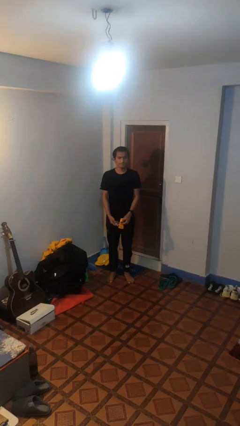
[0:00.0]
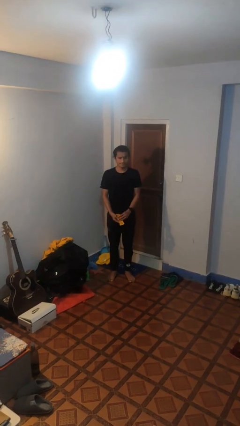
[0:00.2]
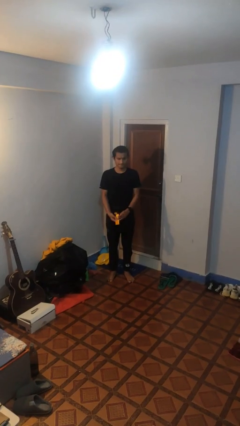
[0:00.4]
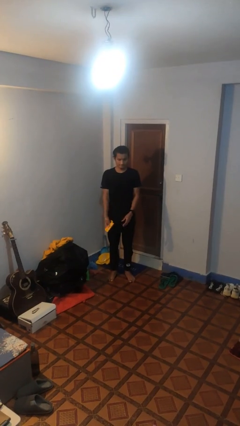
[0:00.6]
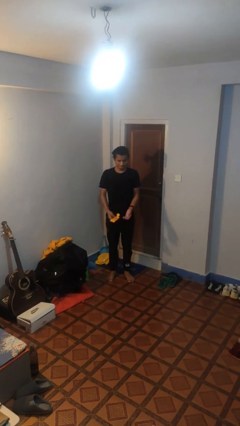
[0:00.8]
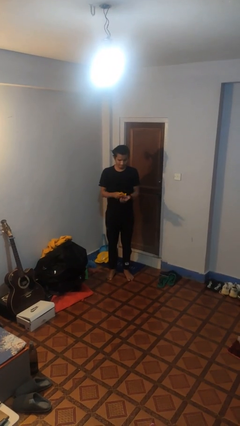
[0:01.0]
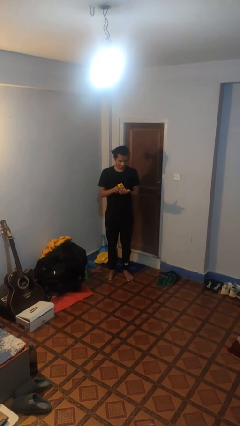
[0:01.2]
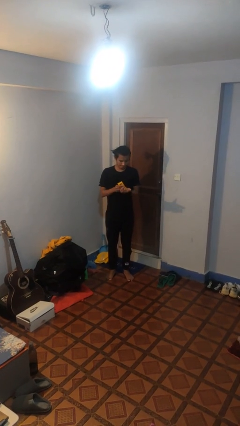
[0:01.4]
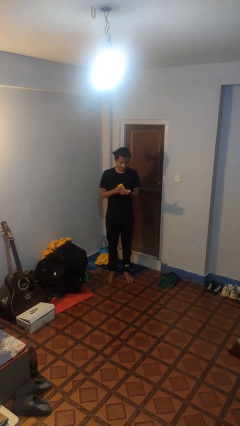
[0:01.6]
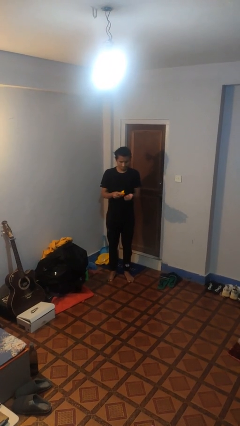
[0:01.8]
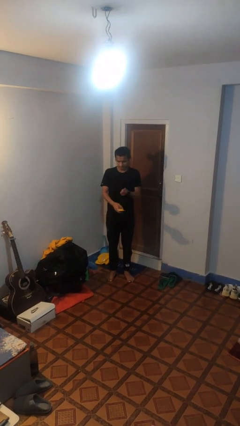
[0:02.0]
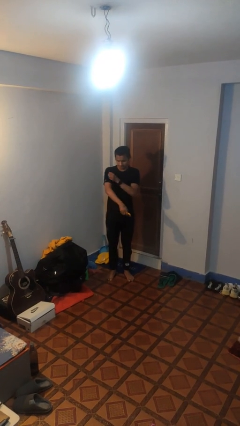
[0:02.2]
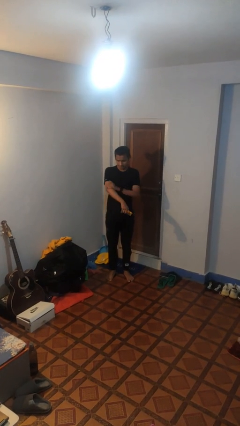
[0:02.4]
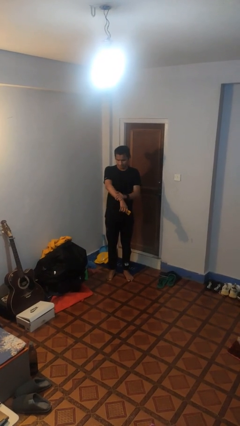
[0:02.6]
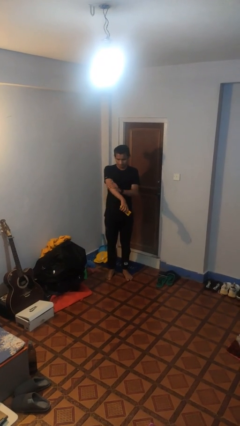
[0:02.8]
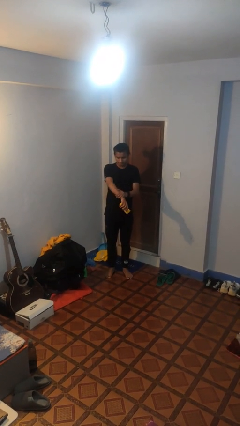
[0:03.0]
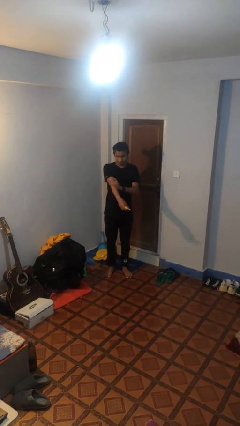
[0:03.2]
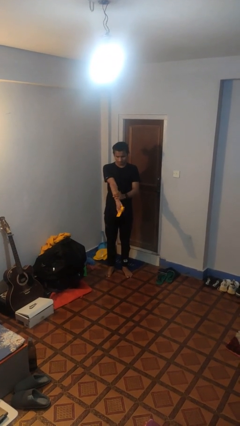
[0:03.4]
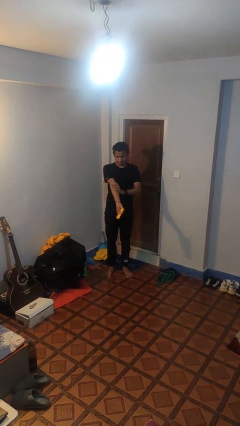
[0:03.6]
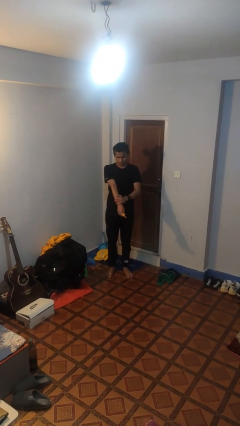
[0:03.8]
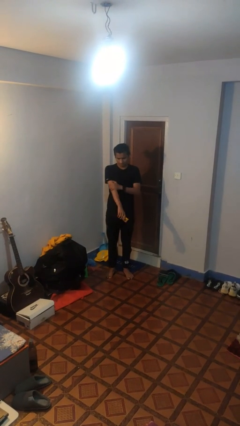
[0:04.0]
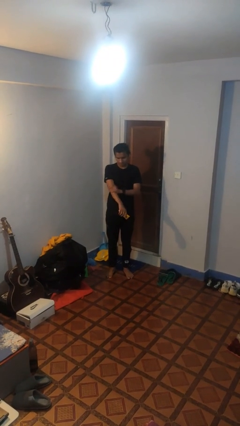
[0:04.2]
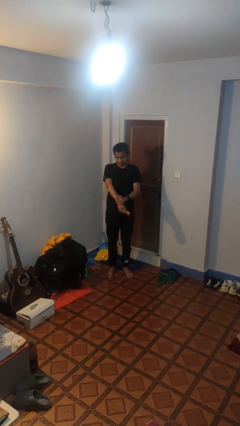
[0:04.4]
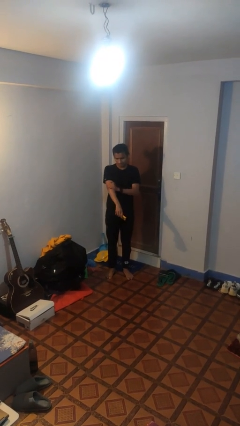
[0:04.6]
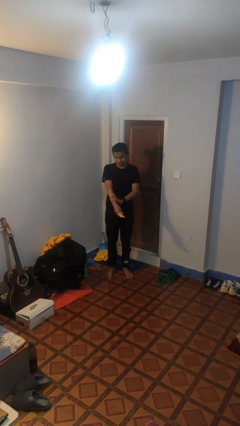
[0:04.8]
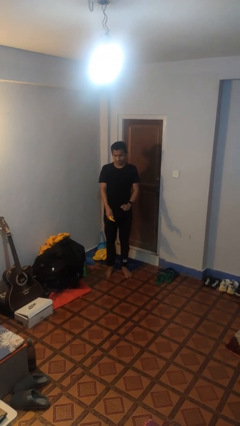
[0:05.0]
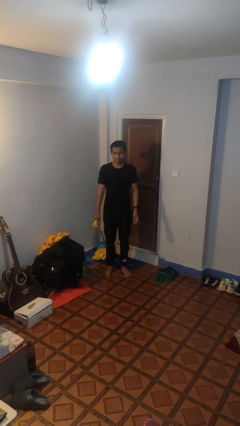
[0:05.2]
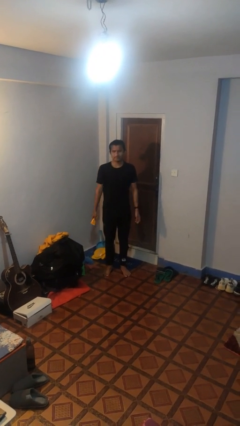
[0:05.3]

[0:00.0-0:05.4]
person applies sunscreen

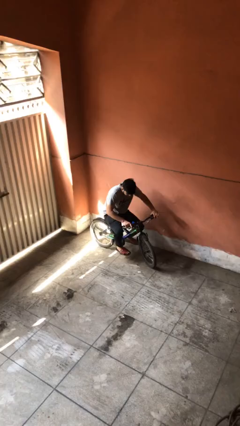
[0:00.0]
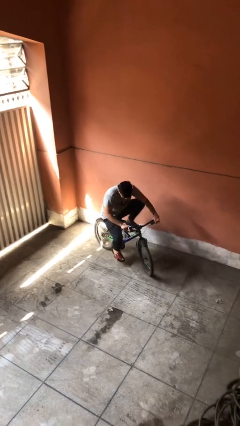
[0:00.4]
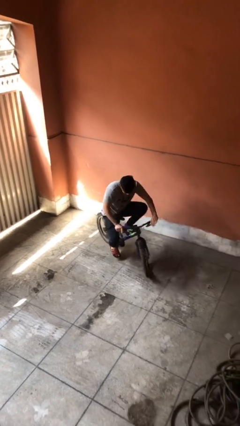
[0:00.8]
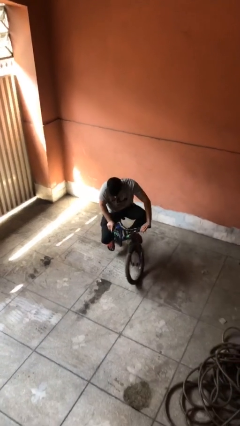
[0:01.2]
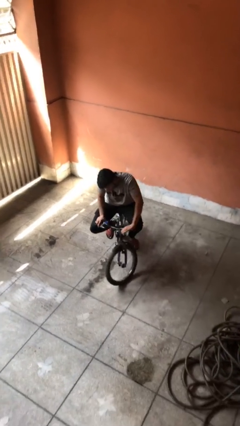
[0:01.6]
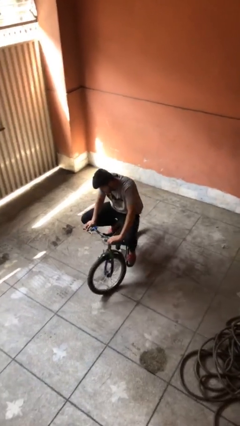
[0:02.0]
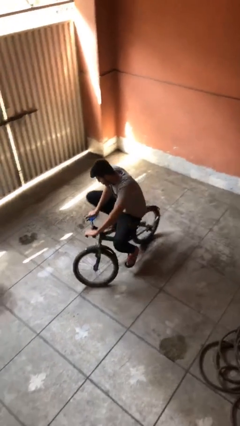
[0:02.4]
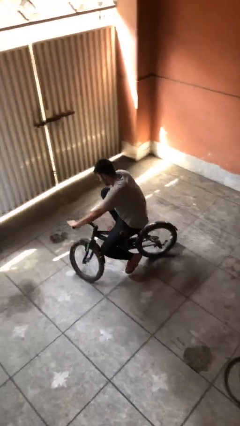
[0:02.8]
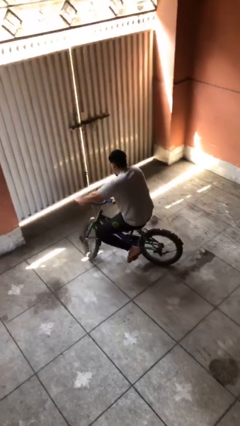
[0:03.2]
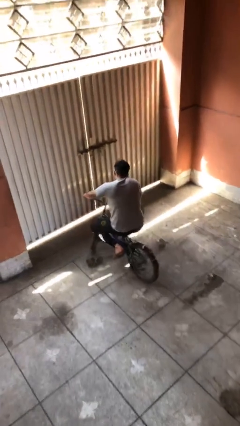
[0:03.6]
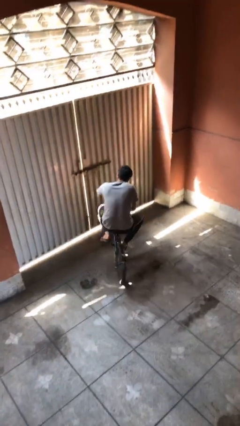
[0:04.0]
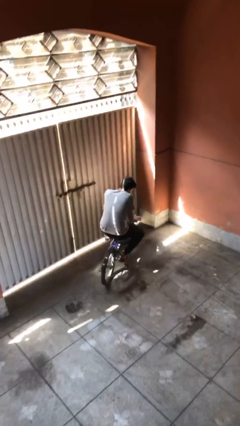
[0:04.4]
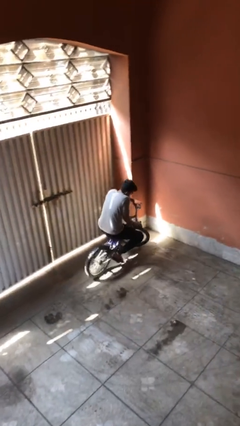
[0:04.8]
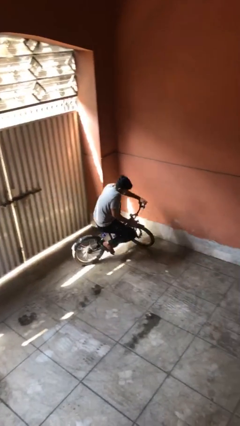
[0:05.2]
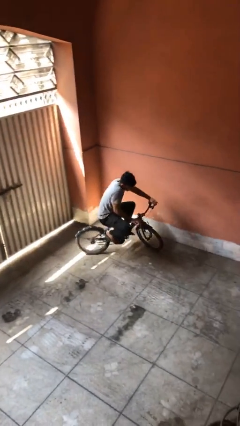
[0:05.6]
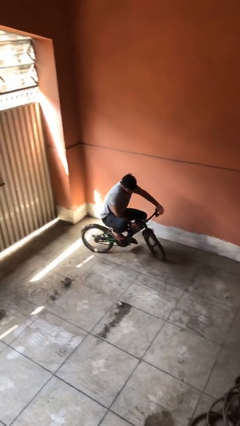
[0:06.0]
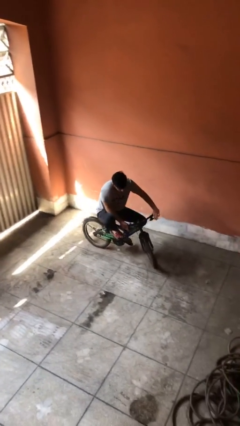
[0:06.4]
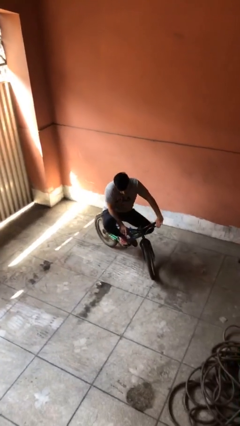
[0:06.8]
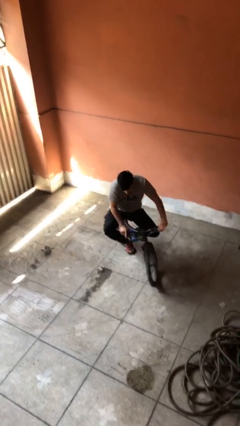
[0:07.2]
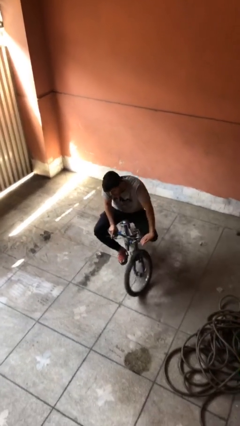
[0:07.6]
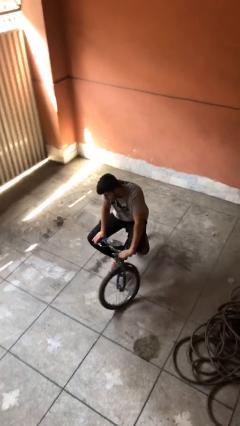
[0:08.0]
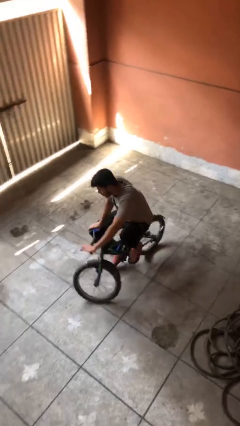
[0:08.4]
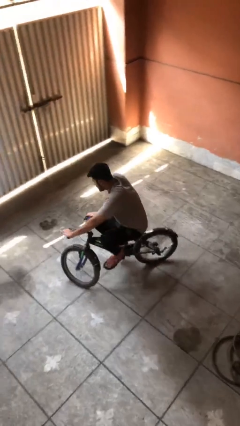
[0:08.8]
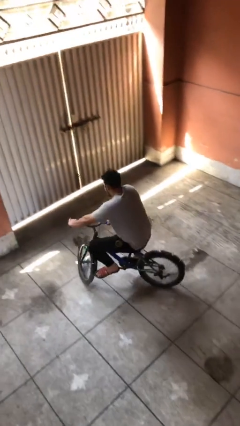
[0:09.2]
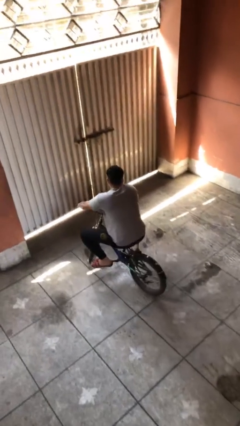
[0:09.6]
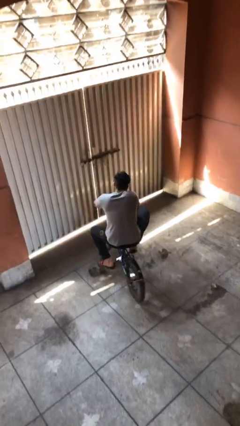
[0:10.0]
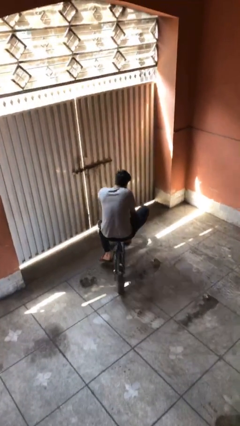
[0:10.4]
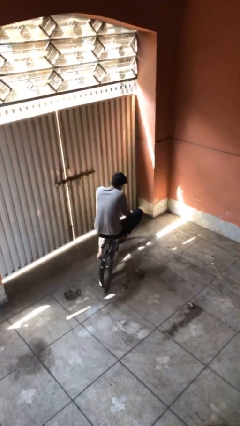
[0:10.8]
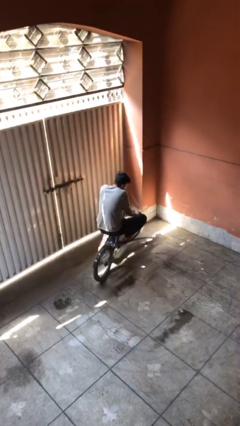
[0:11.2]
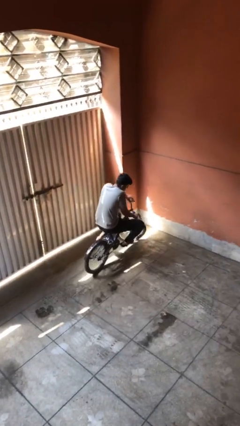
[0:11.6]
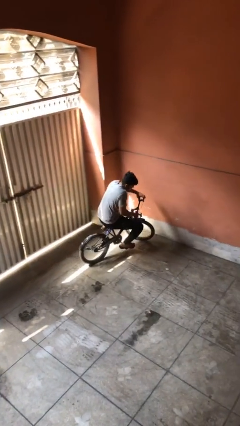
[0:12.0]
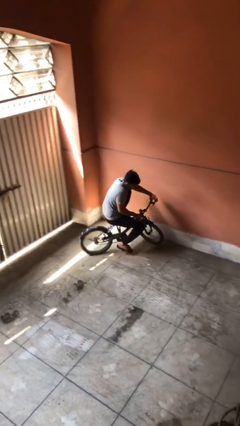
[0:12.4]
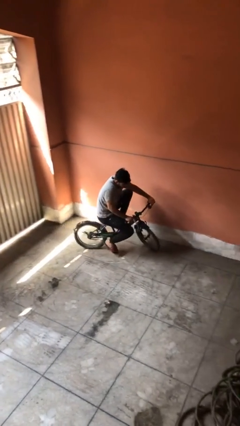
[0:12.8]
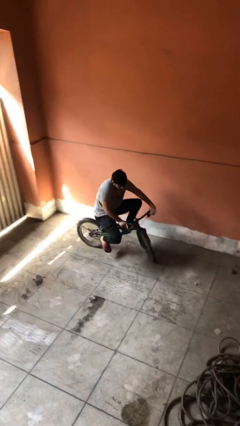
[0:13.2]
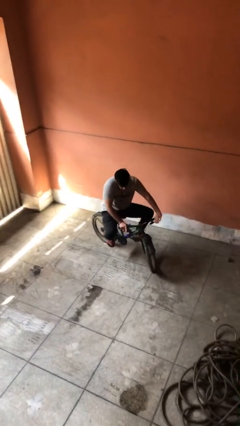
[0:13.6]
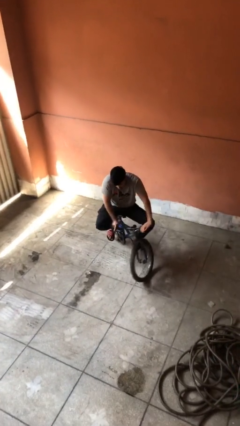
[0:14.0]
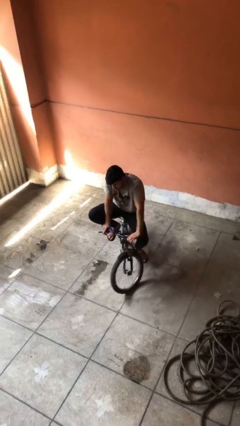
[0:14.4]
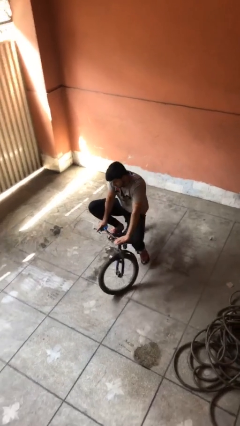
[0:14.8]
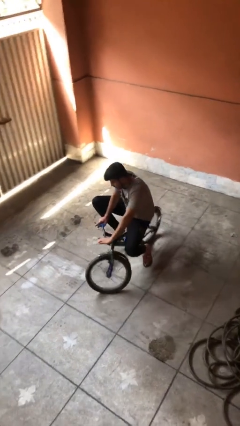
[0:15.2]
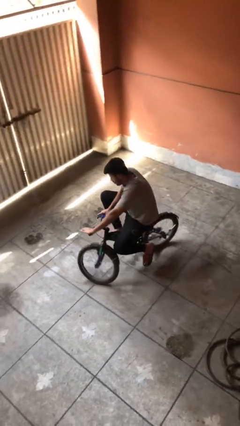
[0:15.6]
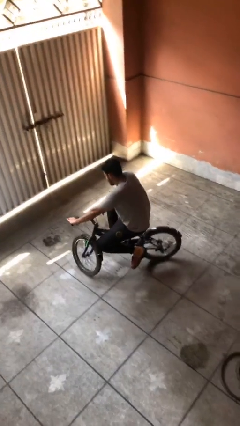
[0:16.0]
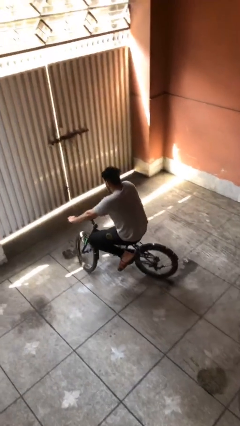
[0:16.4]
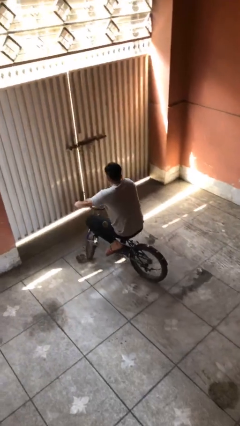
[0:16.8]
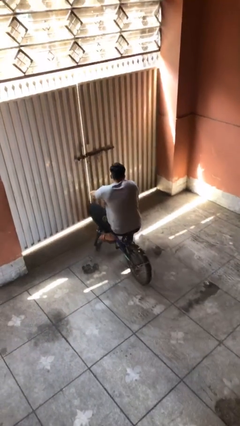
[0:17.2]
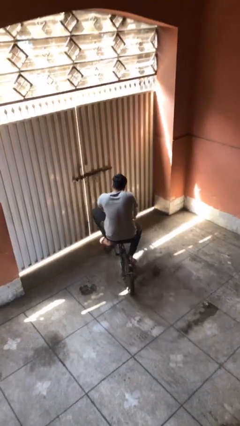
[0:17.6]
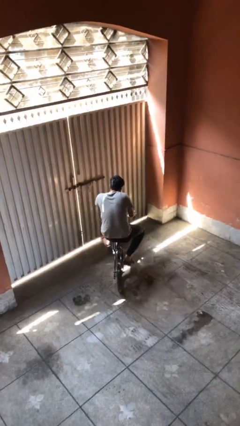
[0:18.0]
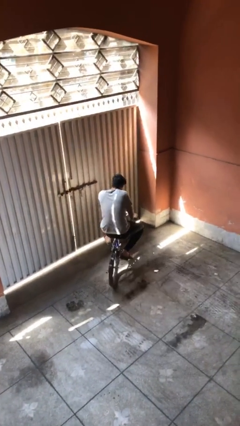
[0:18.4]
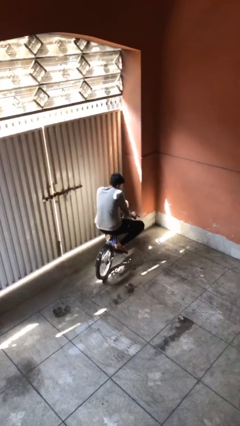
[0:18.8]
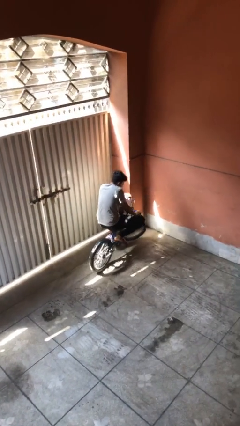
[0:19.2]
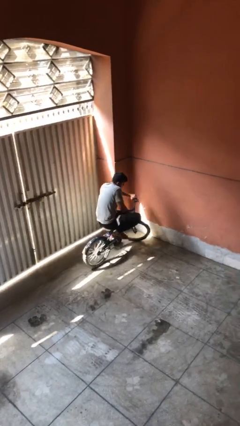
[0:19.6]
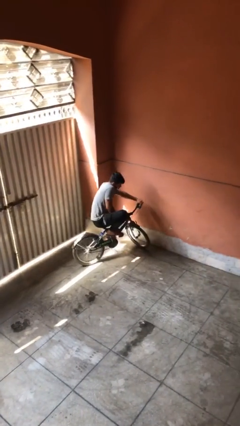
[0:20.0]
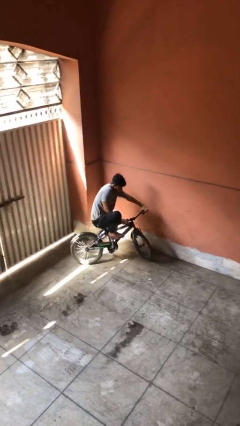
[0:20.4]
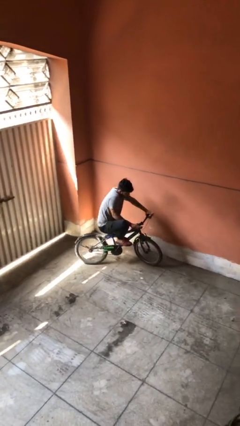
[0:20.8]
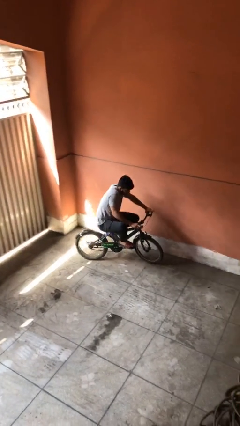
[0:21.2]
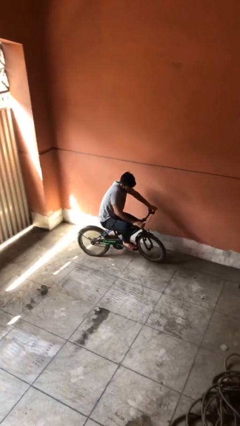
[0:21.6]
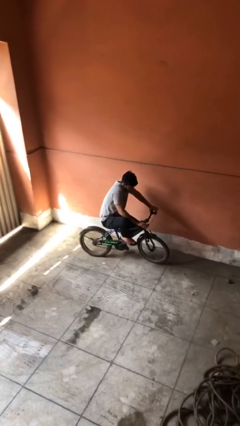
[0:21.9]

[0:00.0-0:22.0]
person rides bicycle

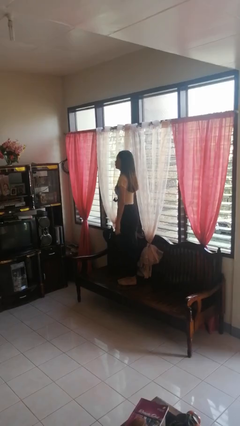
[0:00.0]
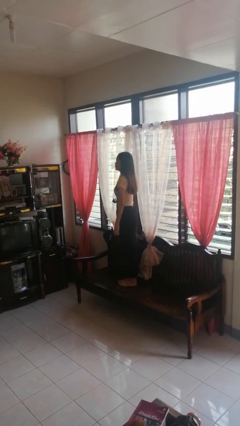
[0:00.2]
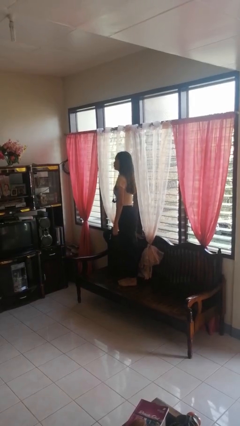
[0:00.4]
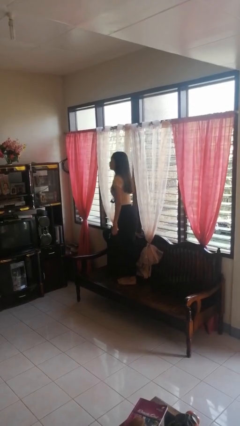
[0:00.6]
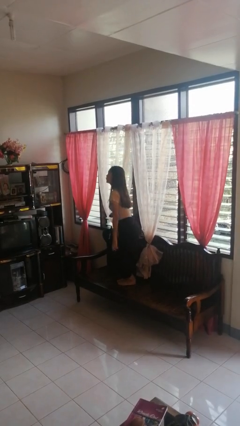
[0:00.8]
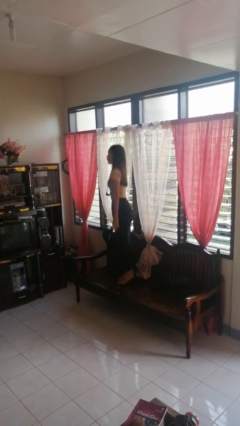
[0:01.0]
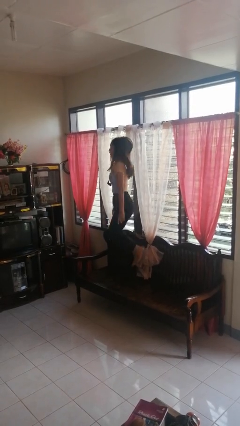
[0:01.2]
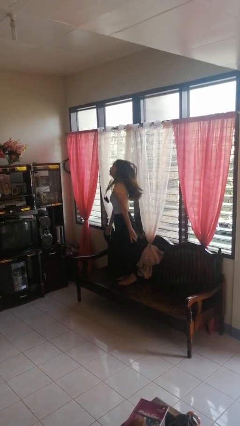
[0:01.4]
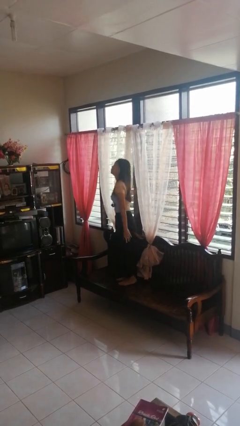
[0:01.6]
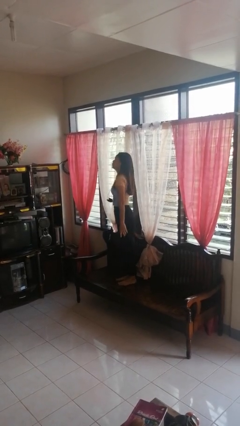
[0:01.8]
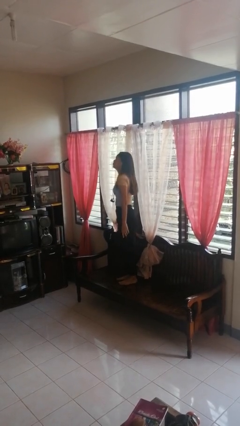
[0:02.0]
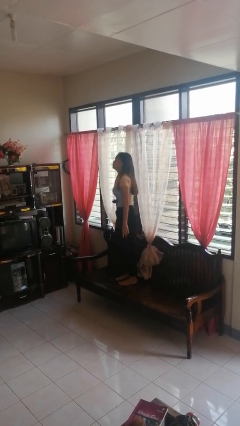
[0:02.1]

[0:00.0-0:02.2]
person jumps on couch
